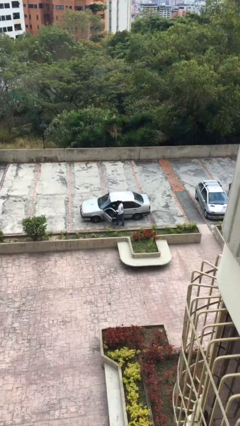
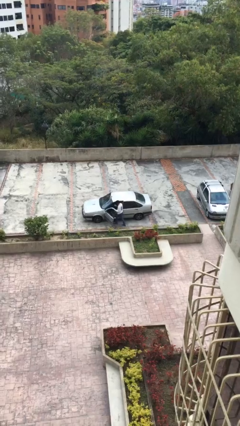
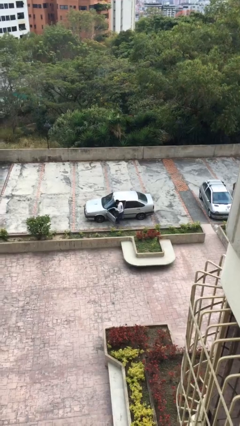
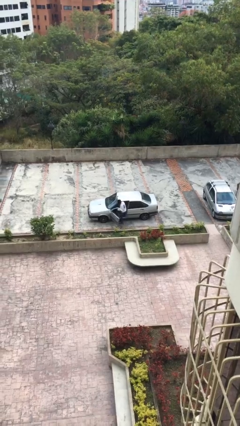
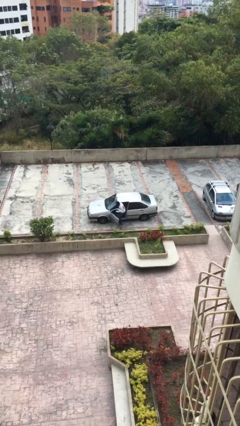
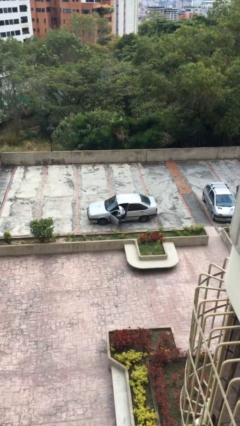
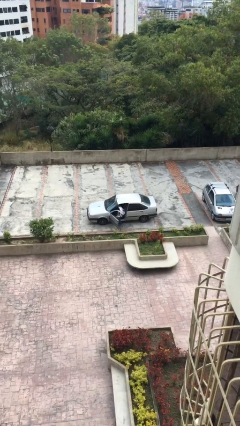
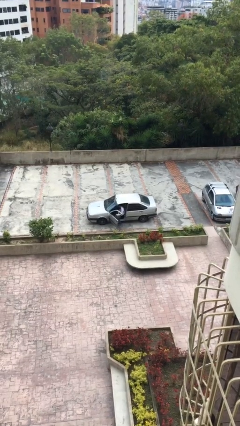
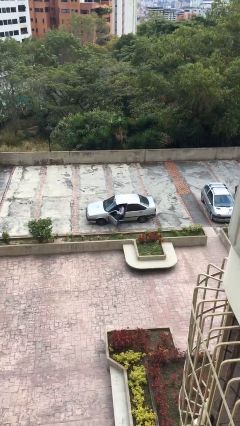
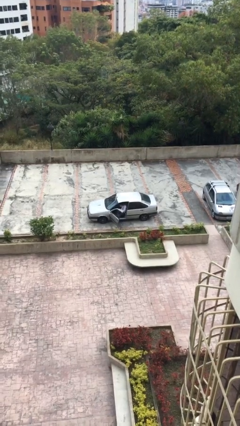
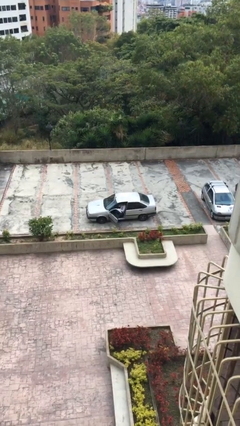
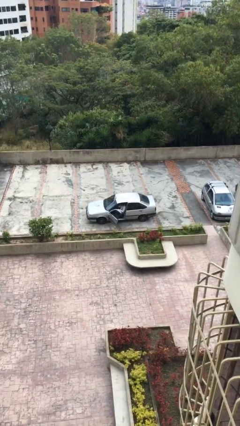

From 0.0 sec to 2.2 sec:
person enters car

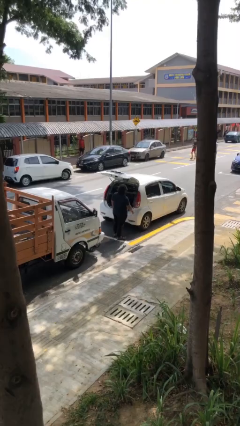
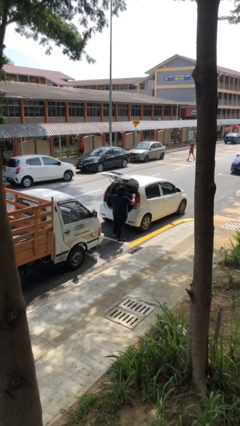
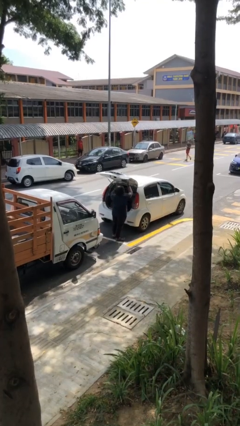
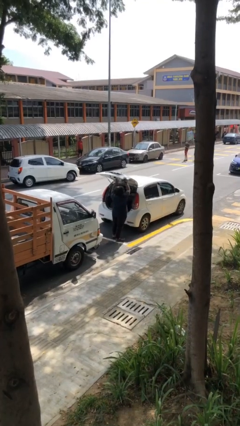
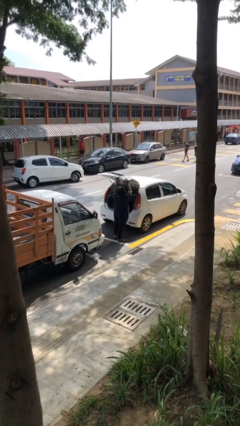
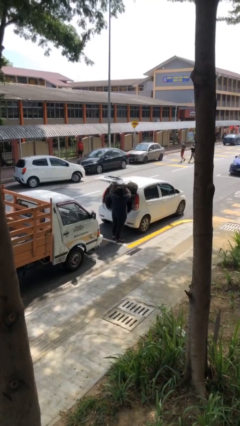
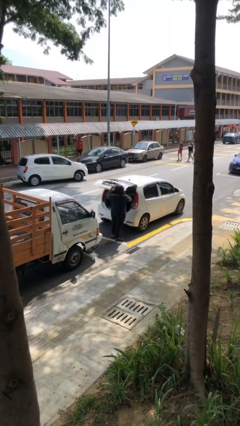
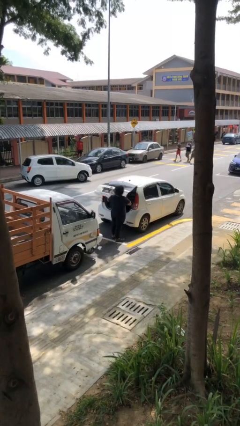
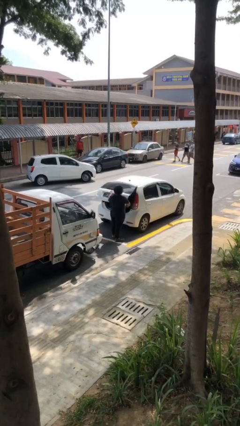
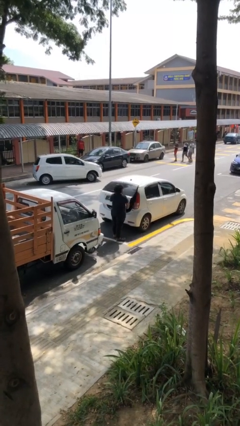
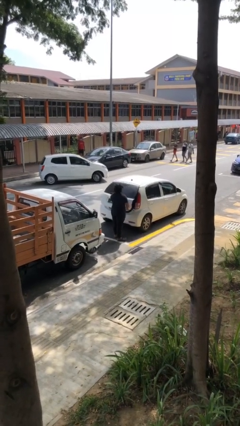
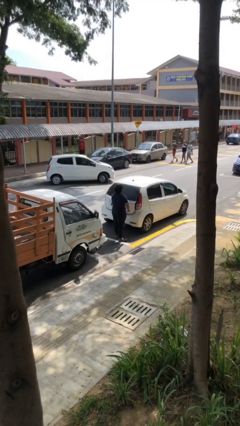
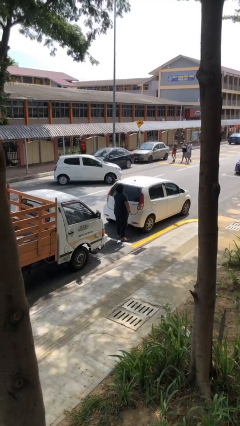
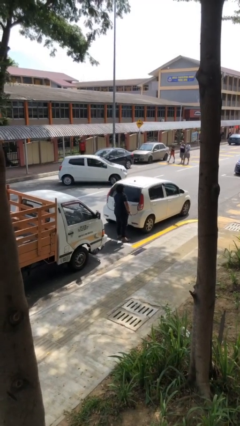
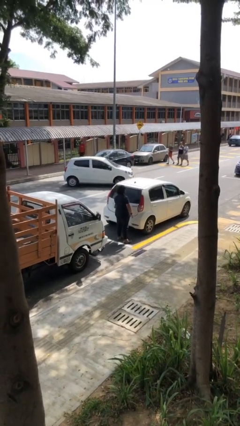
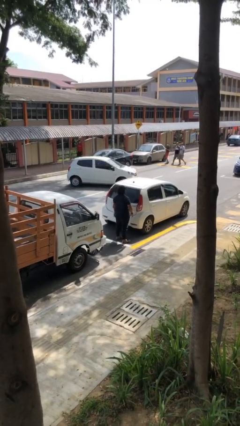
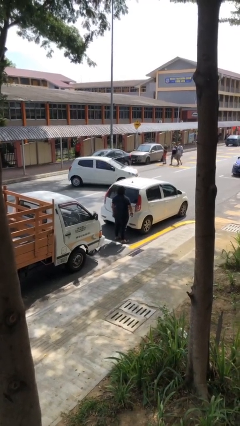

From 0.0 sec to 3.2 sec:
person closes car trunk

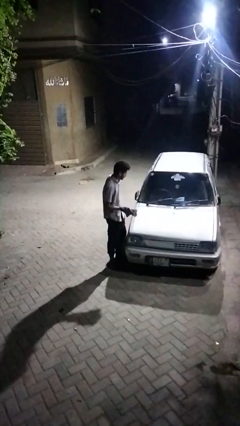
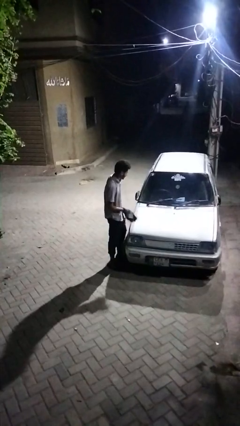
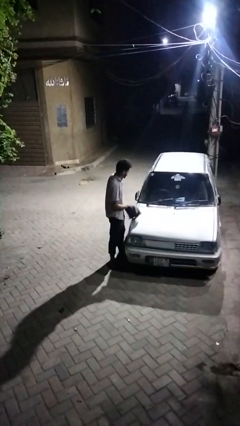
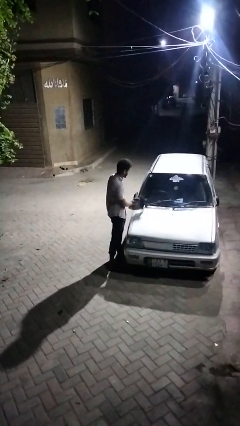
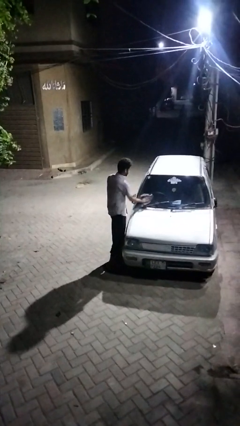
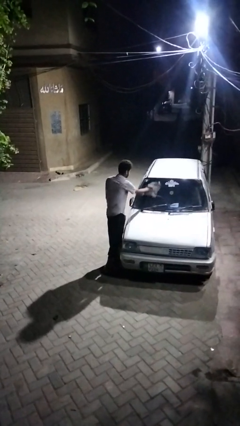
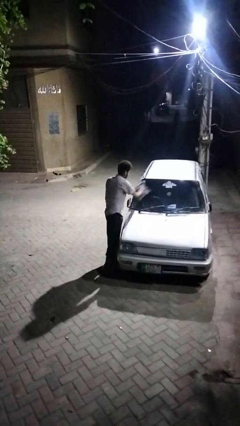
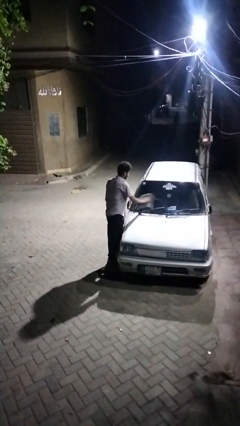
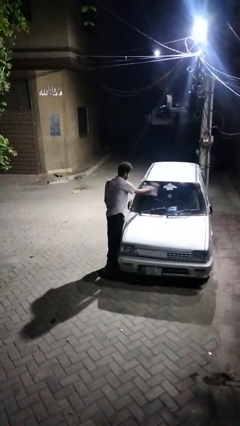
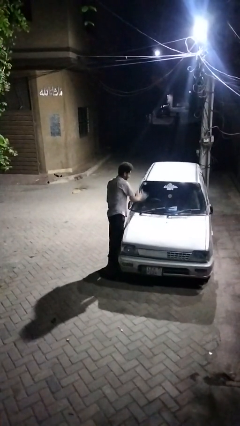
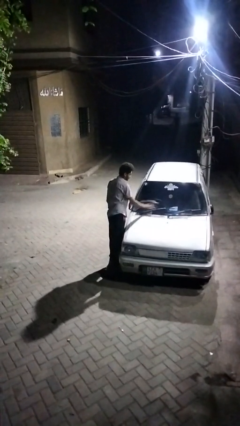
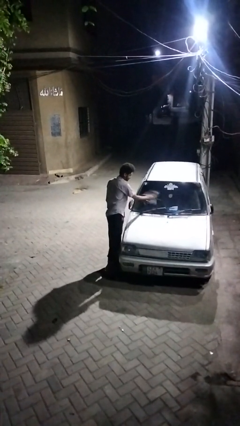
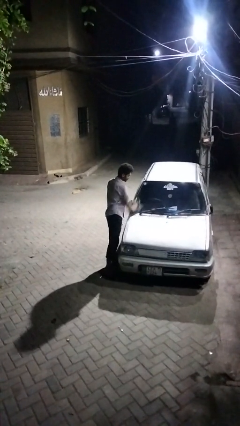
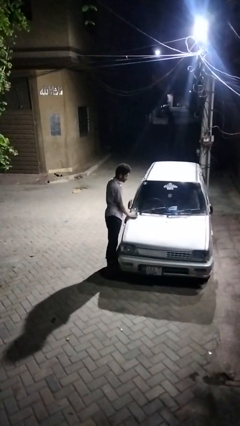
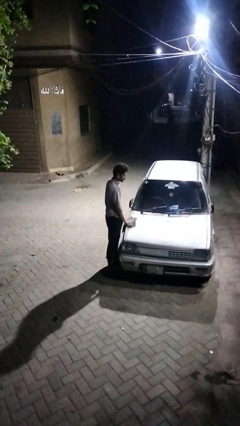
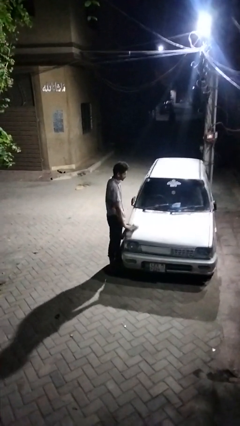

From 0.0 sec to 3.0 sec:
person polishes car with rag

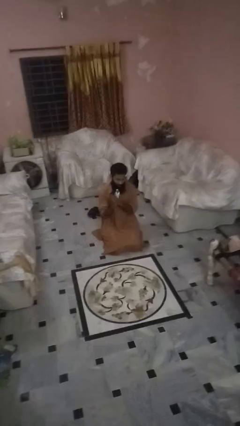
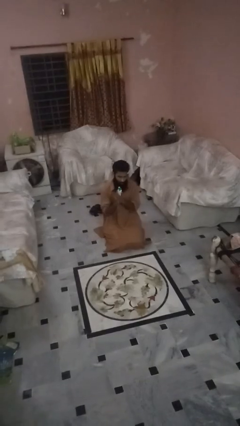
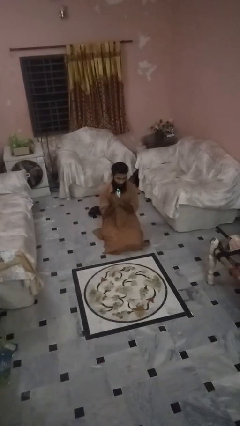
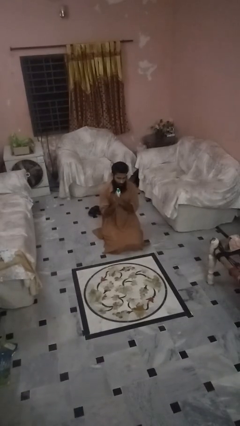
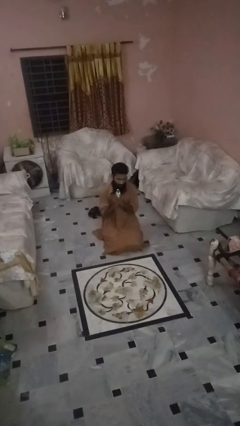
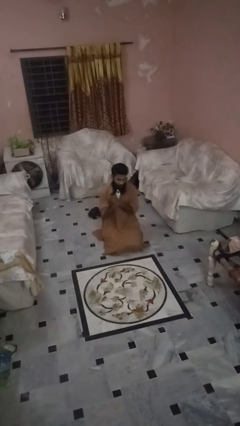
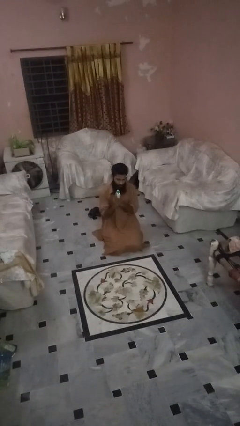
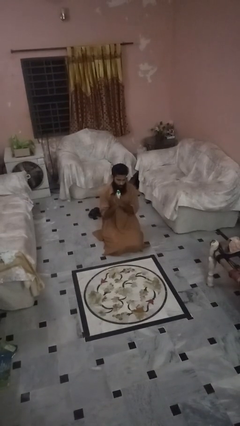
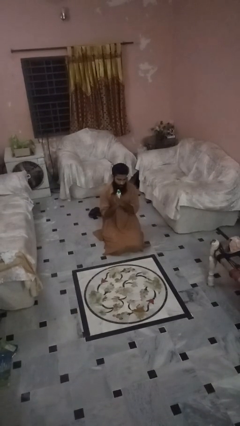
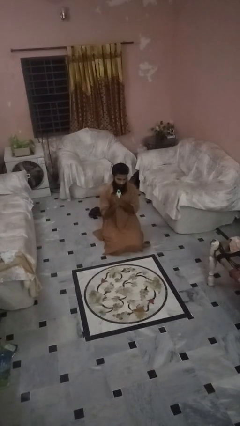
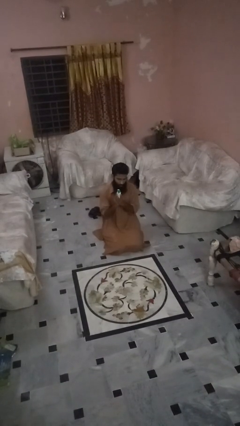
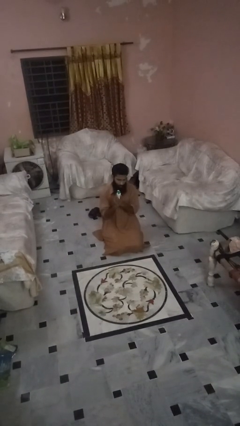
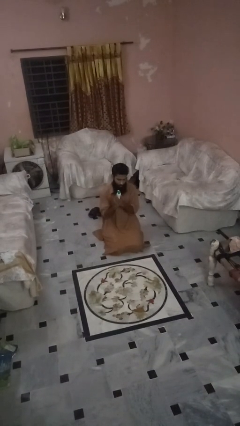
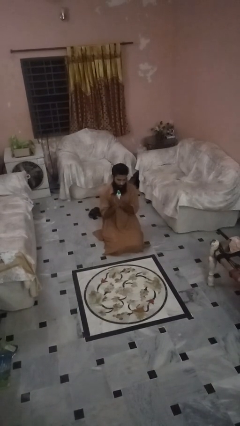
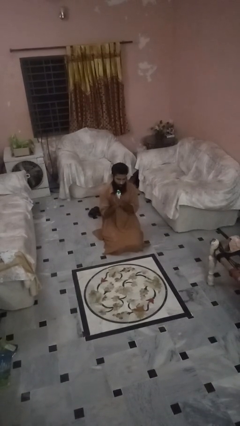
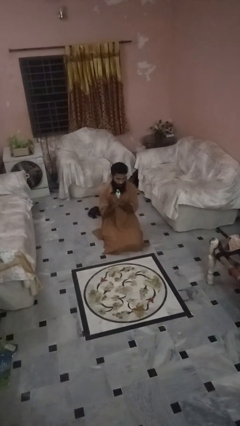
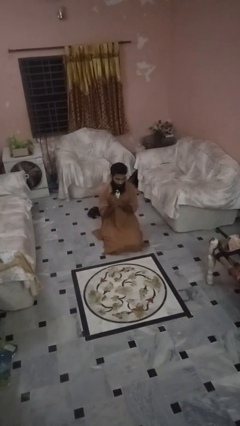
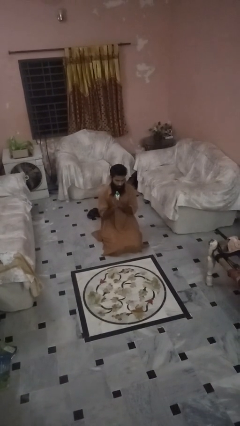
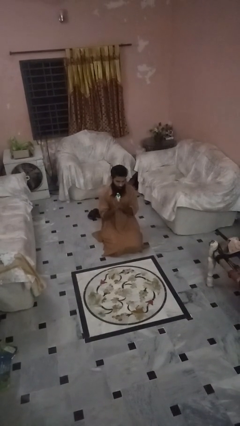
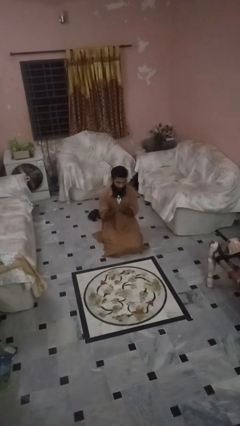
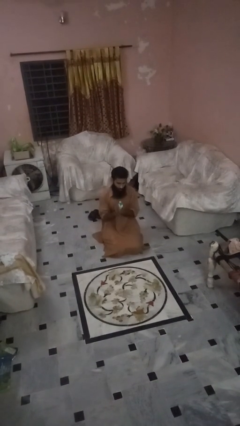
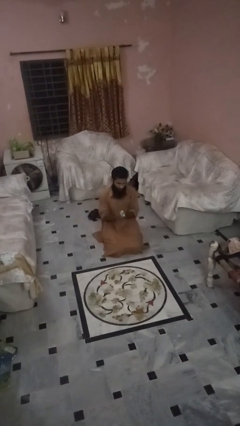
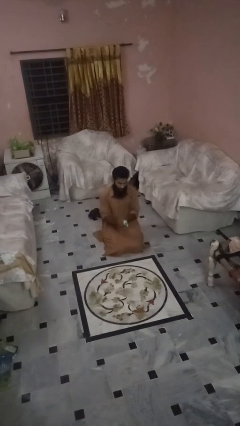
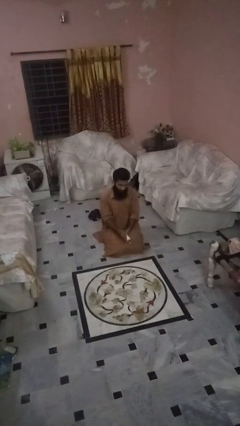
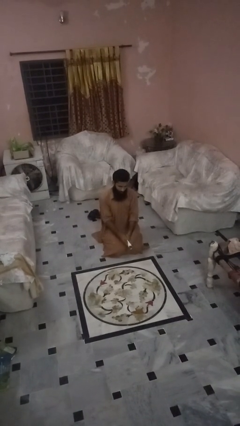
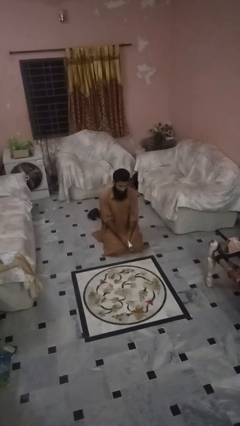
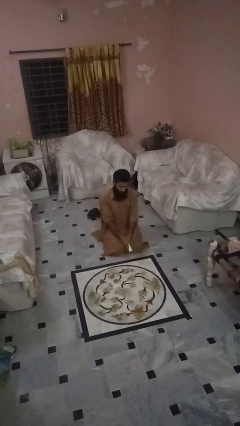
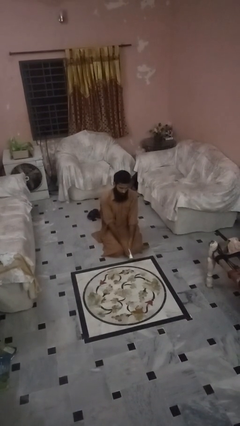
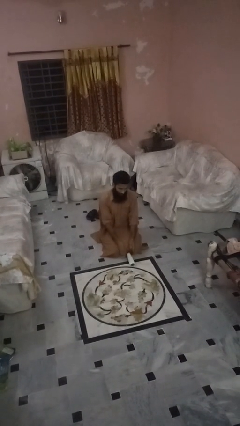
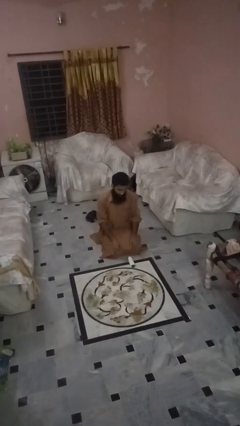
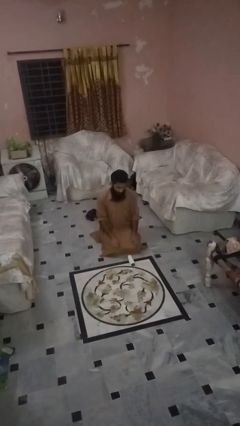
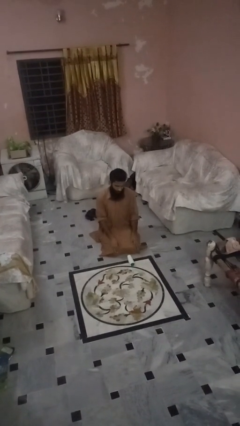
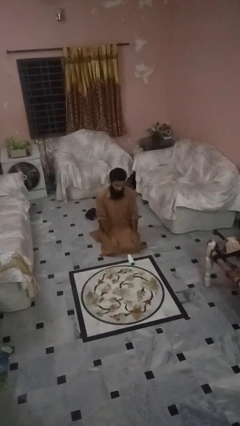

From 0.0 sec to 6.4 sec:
person catches dropped object

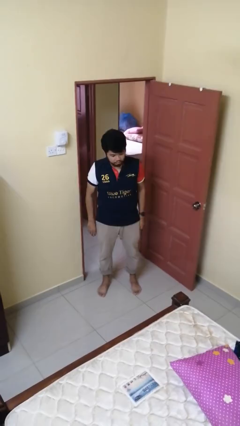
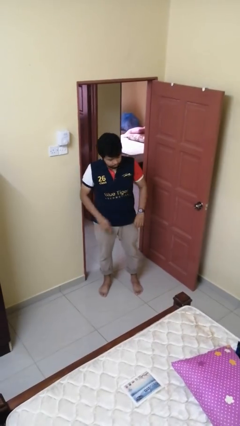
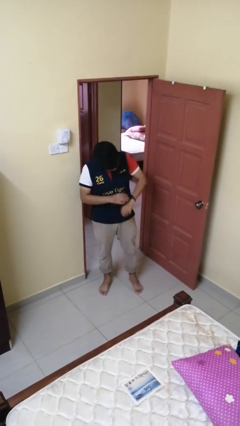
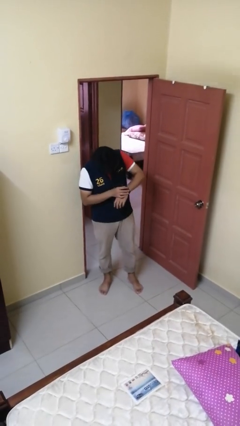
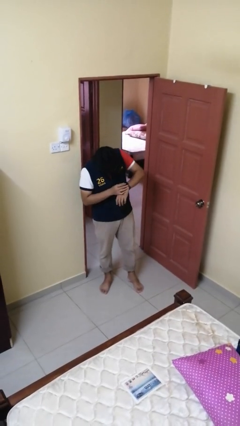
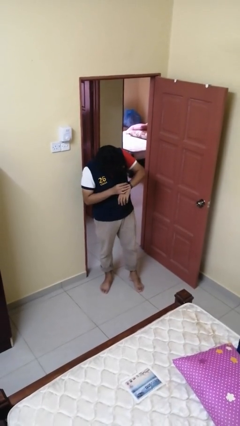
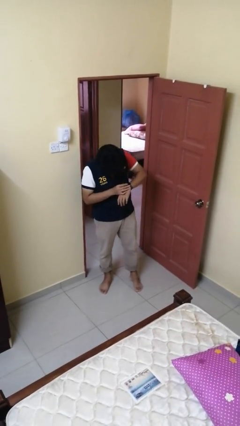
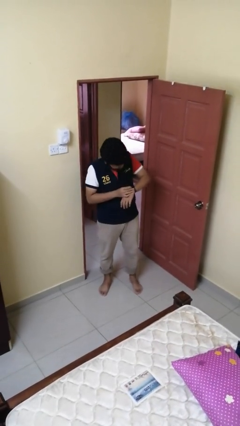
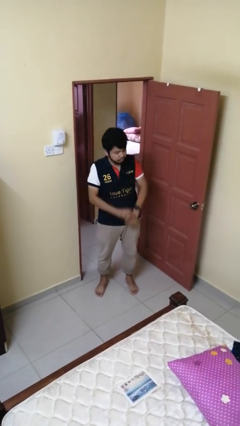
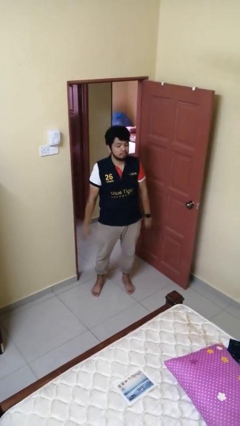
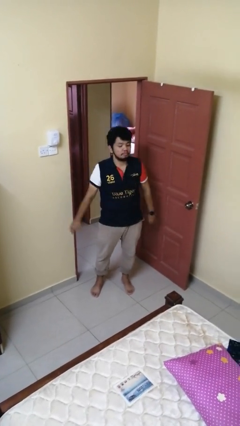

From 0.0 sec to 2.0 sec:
person looks at wristwatch

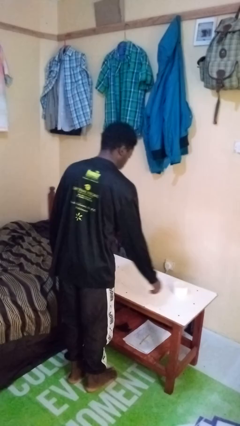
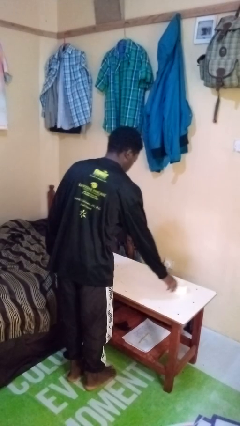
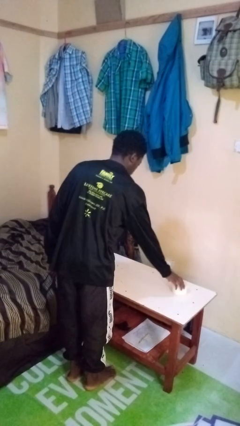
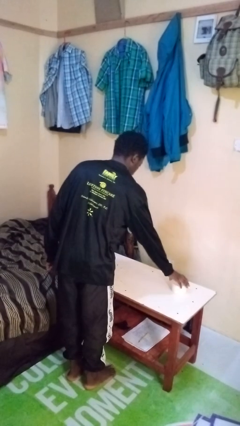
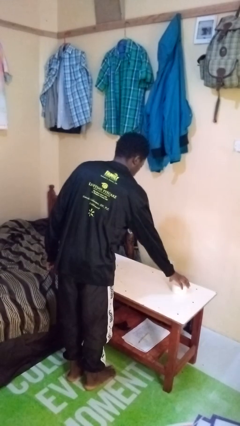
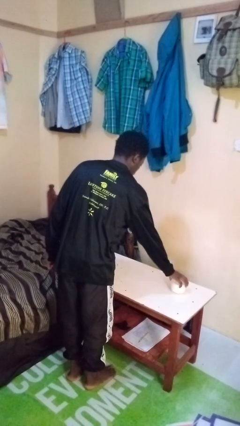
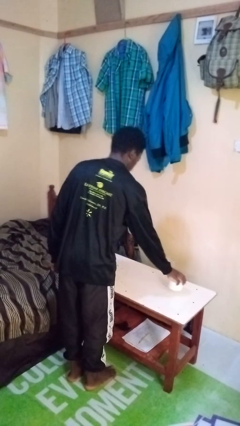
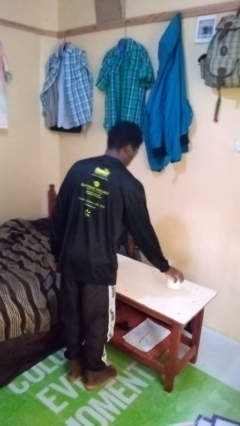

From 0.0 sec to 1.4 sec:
person picks up object from table
